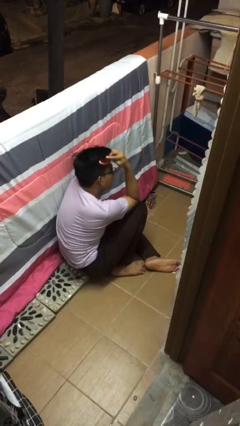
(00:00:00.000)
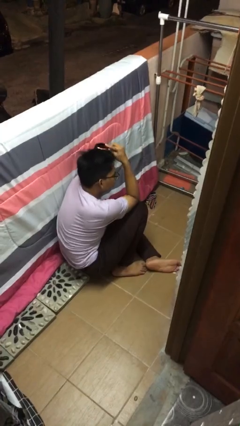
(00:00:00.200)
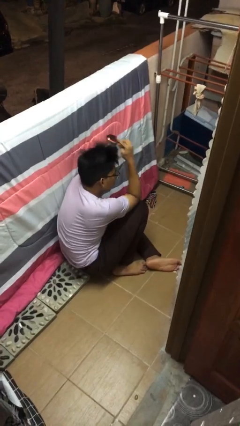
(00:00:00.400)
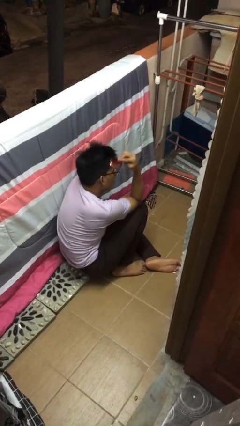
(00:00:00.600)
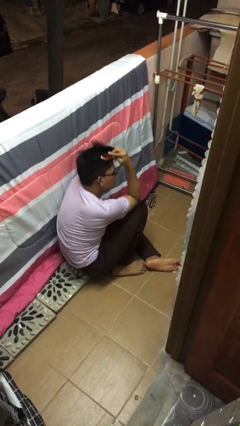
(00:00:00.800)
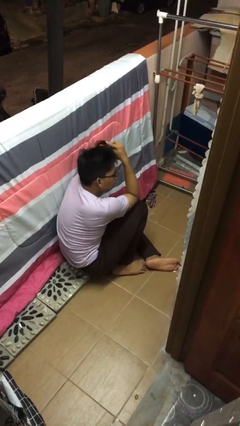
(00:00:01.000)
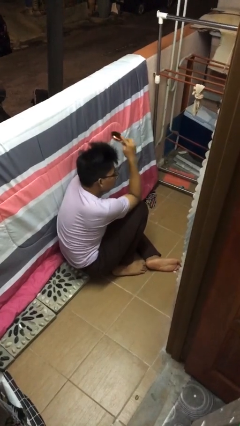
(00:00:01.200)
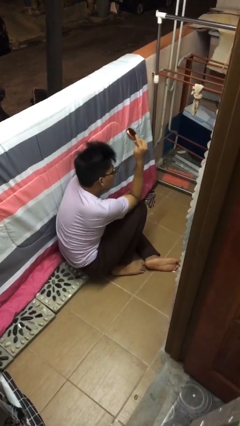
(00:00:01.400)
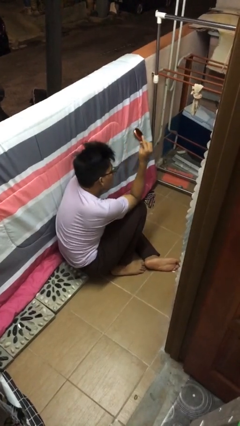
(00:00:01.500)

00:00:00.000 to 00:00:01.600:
person brushes hair

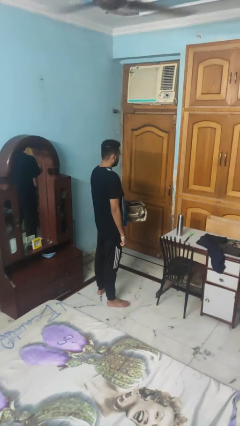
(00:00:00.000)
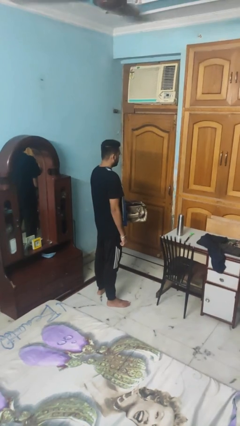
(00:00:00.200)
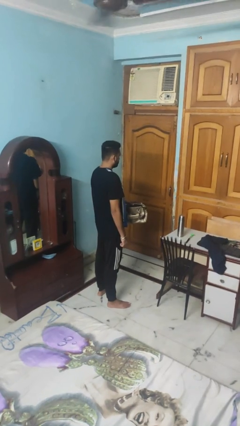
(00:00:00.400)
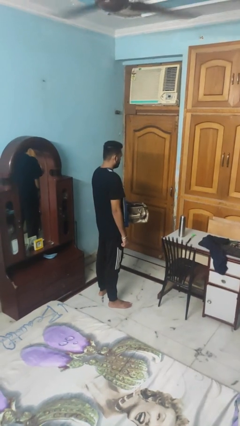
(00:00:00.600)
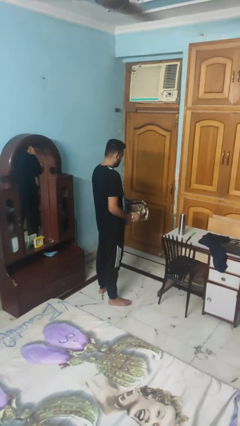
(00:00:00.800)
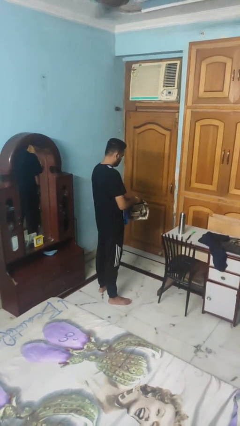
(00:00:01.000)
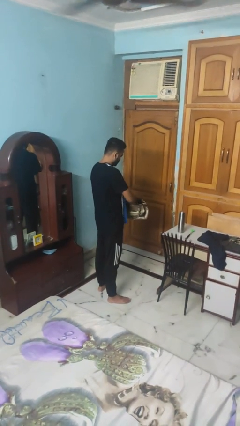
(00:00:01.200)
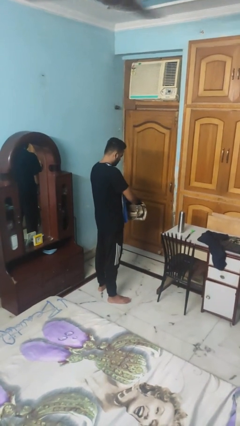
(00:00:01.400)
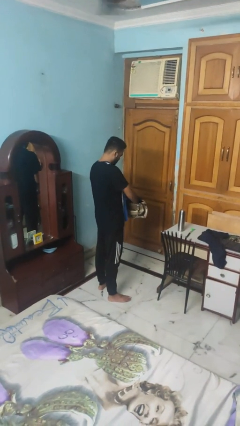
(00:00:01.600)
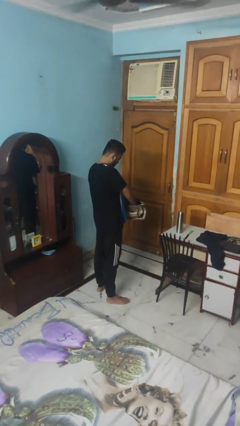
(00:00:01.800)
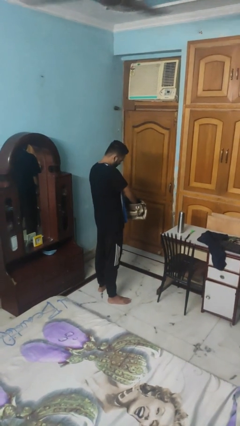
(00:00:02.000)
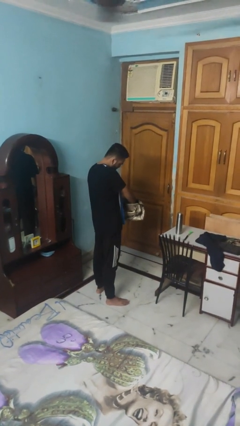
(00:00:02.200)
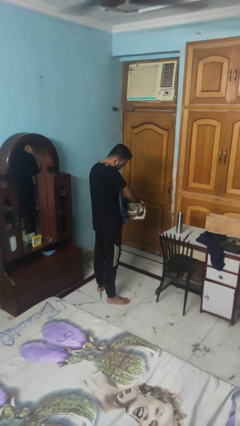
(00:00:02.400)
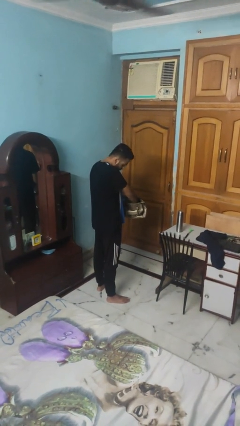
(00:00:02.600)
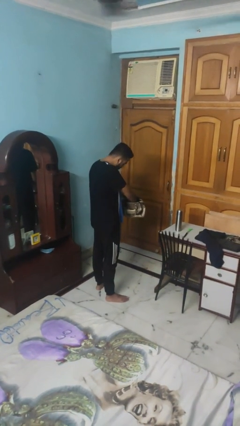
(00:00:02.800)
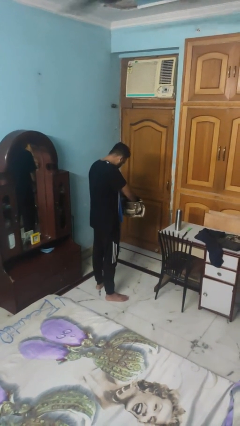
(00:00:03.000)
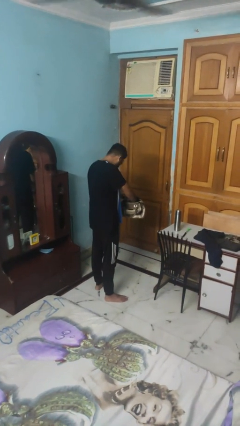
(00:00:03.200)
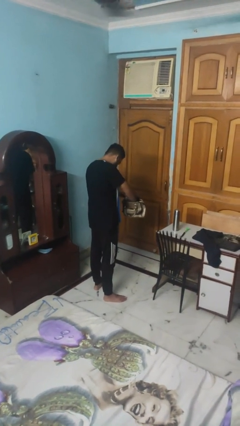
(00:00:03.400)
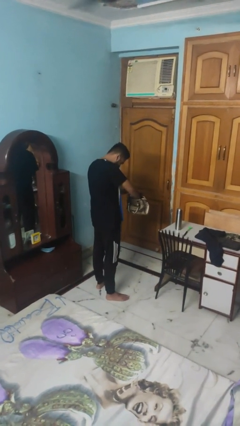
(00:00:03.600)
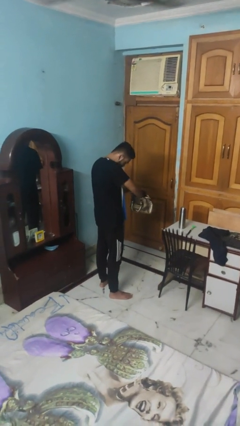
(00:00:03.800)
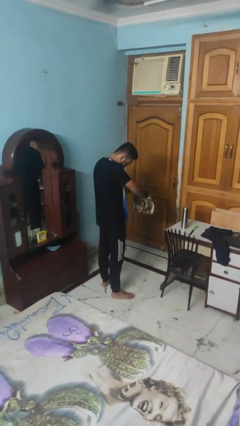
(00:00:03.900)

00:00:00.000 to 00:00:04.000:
person searches in purse

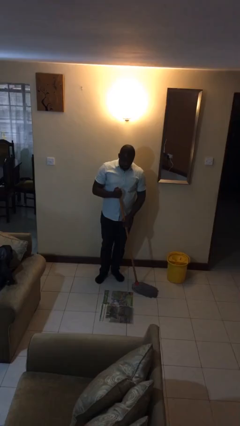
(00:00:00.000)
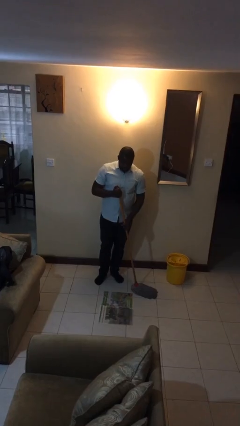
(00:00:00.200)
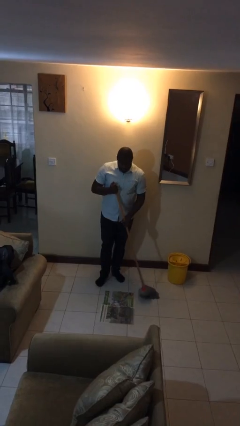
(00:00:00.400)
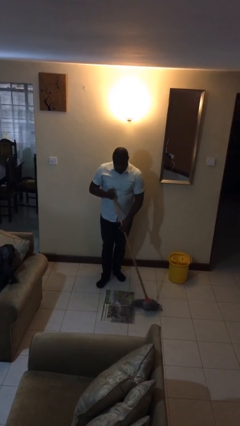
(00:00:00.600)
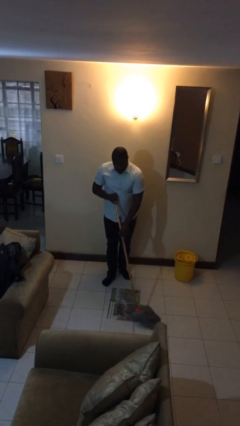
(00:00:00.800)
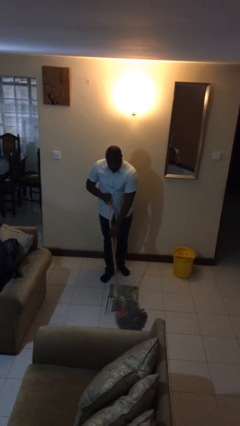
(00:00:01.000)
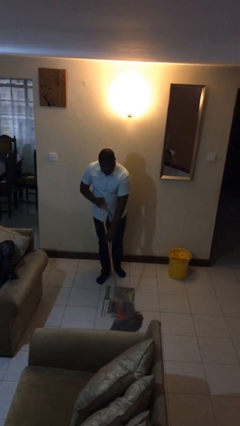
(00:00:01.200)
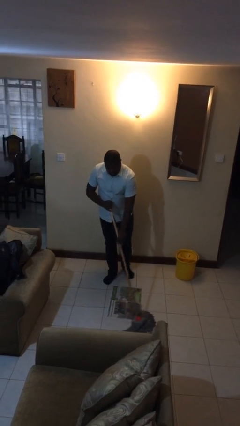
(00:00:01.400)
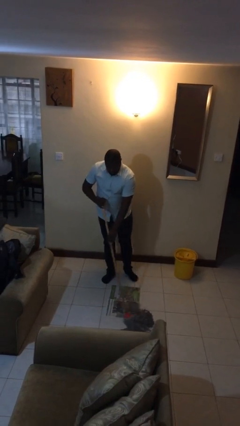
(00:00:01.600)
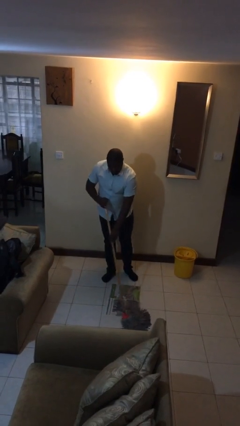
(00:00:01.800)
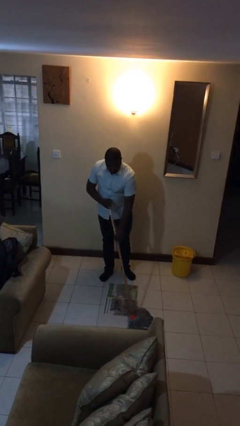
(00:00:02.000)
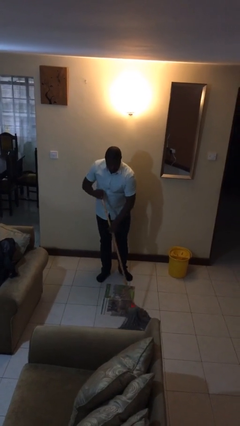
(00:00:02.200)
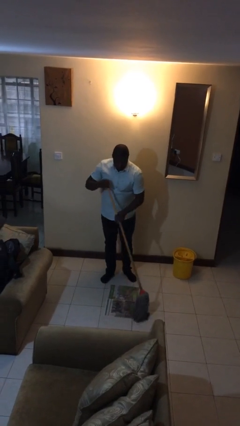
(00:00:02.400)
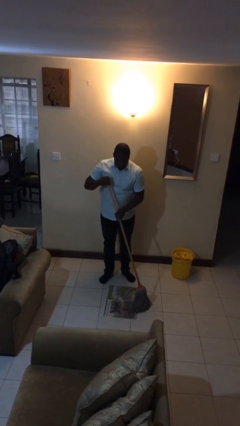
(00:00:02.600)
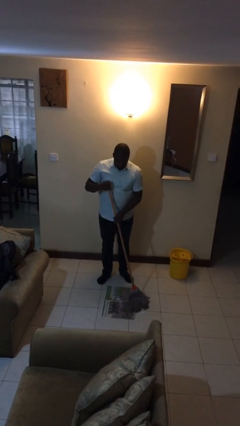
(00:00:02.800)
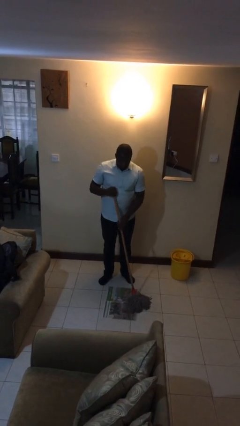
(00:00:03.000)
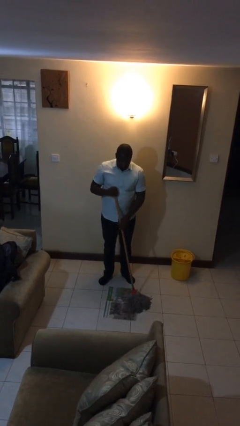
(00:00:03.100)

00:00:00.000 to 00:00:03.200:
person mops

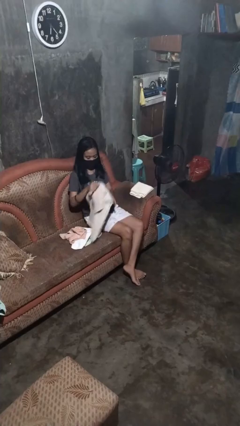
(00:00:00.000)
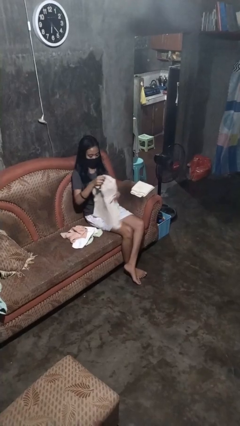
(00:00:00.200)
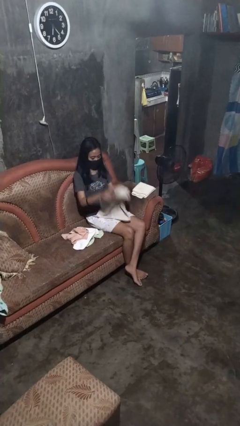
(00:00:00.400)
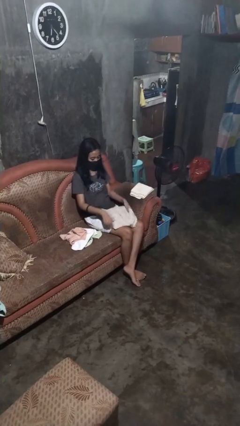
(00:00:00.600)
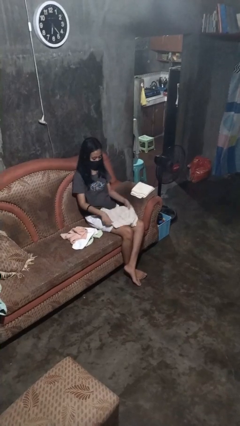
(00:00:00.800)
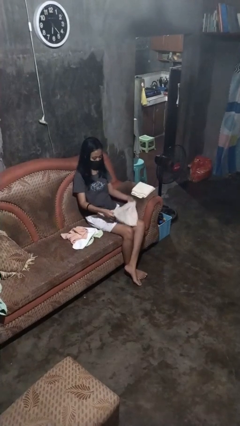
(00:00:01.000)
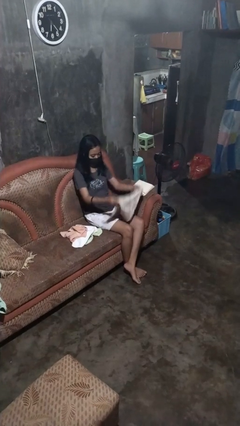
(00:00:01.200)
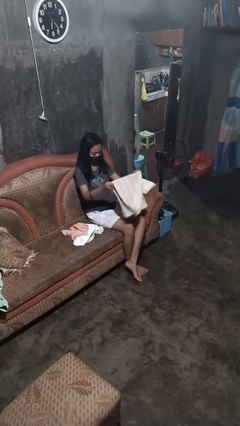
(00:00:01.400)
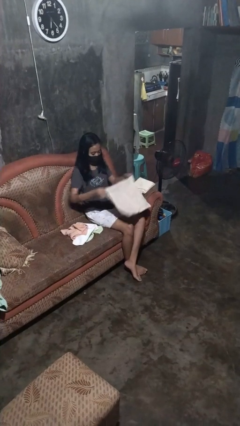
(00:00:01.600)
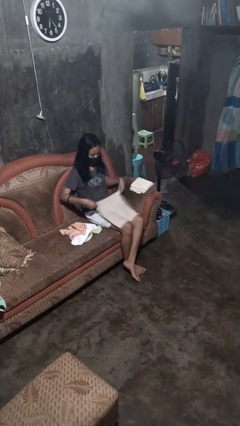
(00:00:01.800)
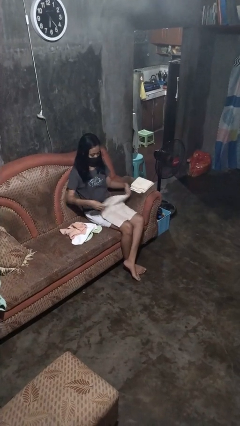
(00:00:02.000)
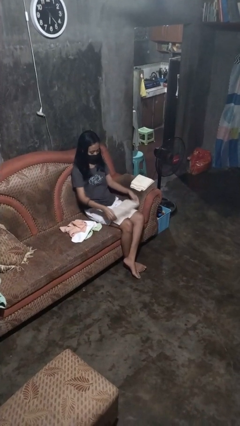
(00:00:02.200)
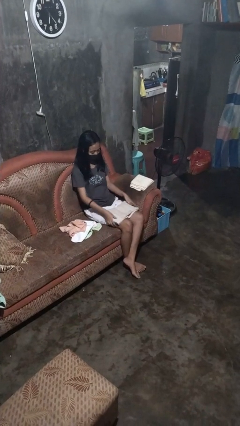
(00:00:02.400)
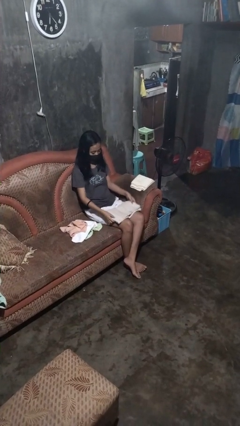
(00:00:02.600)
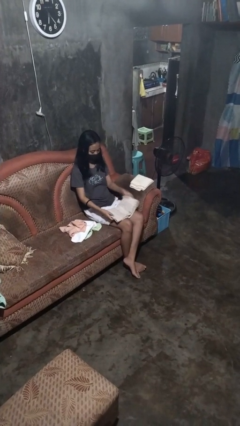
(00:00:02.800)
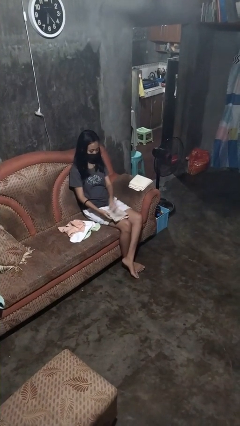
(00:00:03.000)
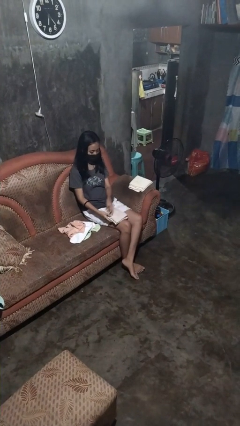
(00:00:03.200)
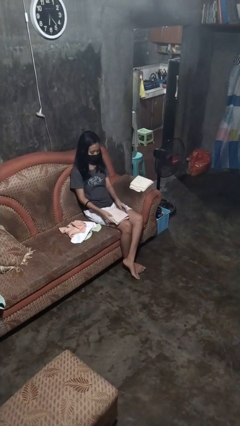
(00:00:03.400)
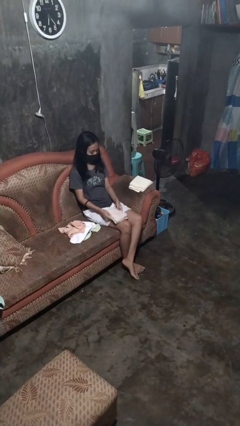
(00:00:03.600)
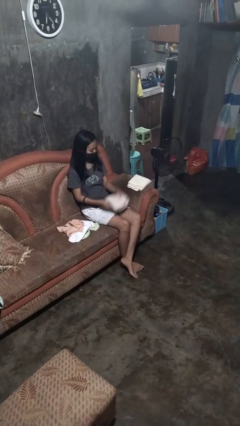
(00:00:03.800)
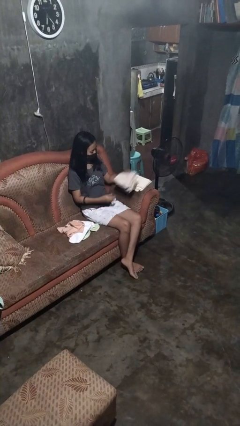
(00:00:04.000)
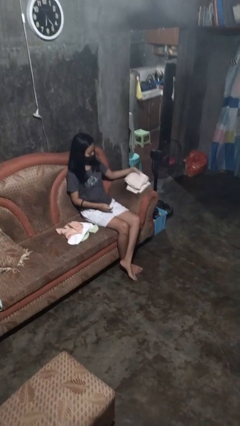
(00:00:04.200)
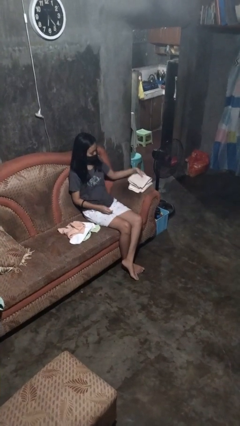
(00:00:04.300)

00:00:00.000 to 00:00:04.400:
person folds towel

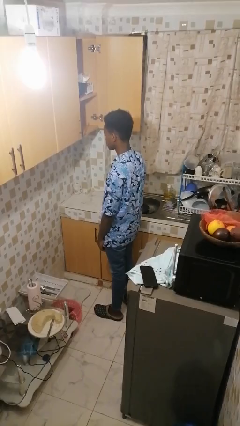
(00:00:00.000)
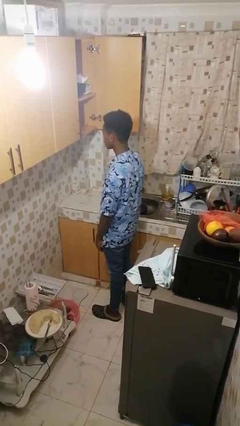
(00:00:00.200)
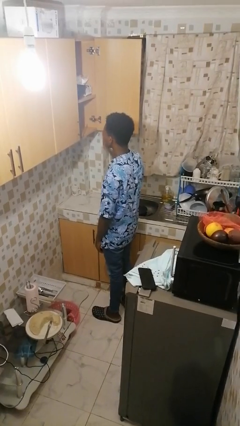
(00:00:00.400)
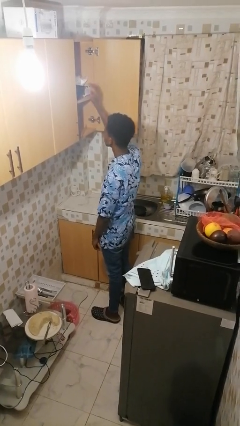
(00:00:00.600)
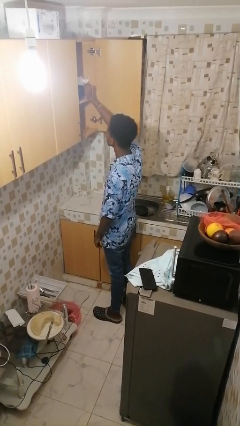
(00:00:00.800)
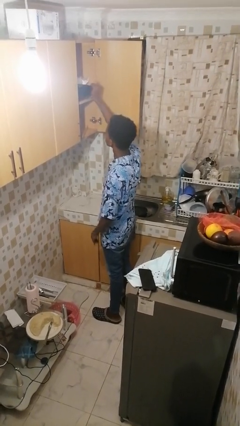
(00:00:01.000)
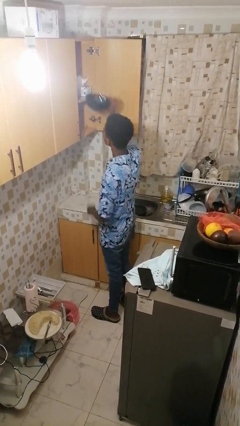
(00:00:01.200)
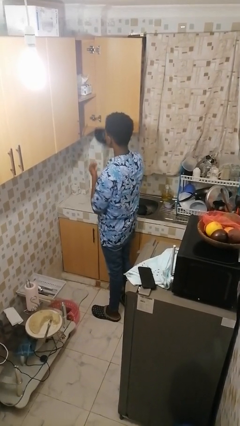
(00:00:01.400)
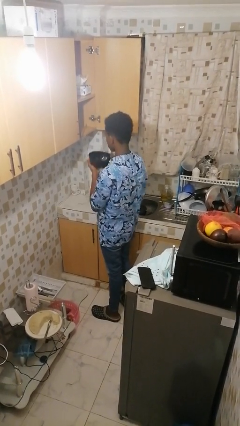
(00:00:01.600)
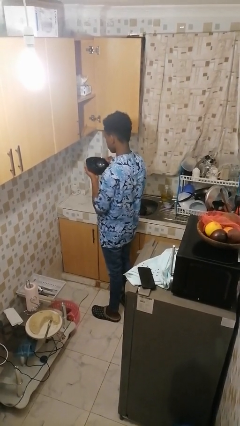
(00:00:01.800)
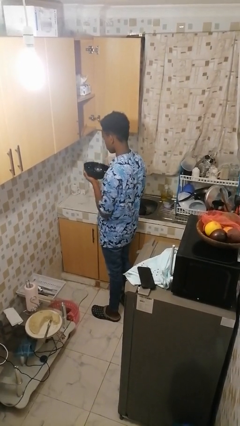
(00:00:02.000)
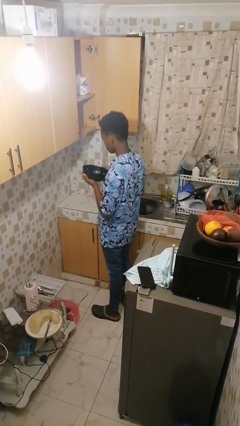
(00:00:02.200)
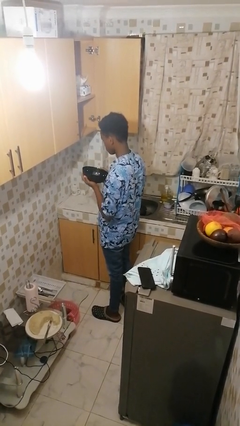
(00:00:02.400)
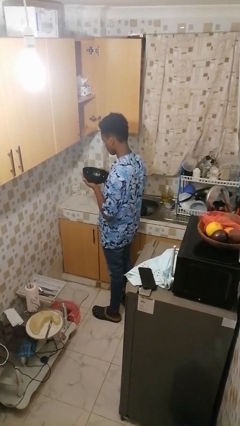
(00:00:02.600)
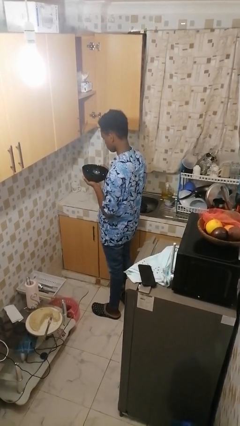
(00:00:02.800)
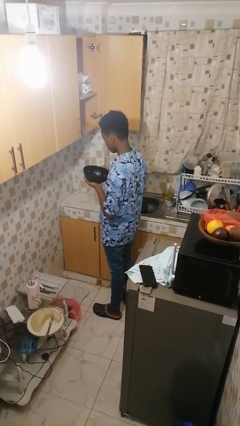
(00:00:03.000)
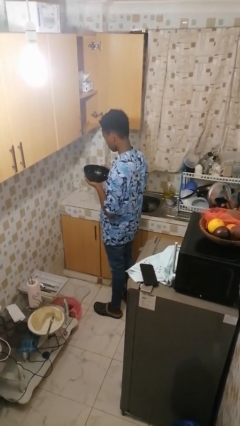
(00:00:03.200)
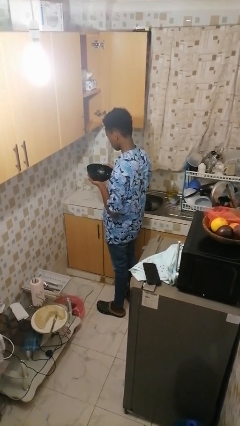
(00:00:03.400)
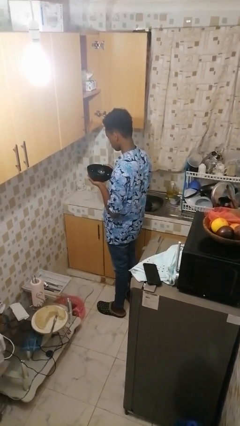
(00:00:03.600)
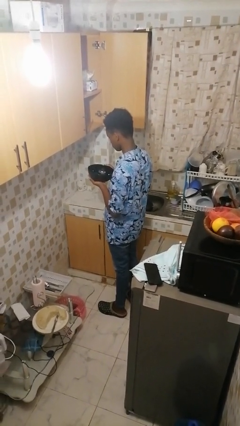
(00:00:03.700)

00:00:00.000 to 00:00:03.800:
person picks up object from cabinet

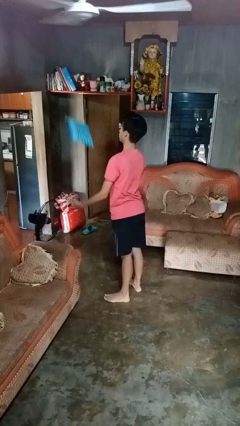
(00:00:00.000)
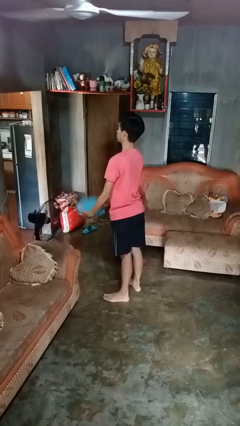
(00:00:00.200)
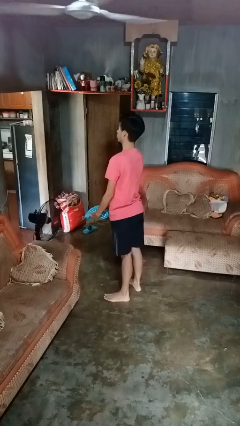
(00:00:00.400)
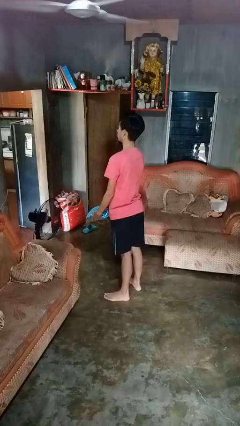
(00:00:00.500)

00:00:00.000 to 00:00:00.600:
person drops object
